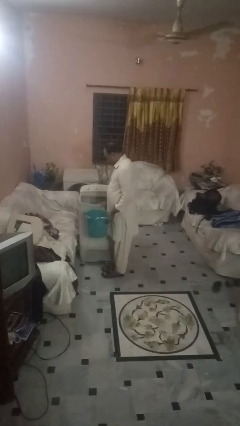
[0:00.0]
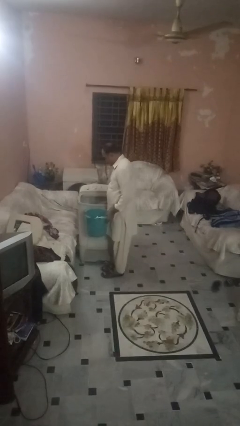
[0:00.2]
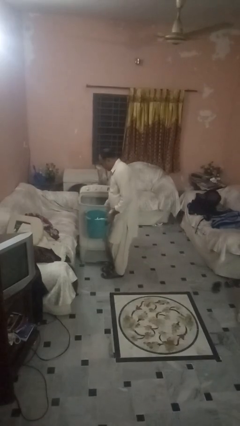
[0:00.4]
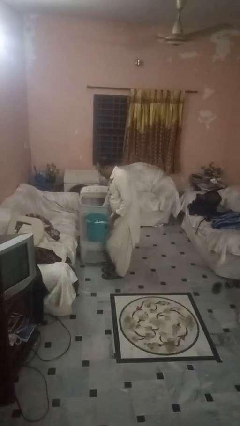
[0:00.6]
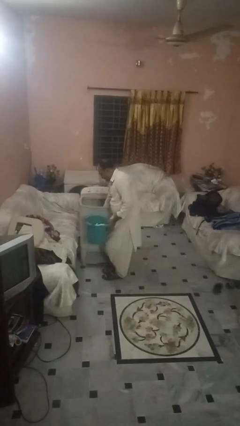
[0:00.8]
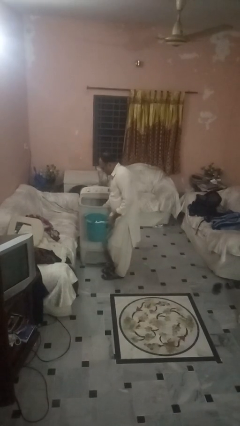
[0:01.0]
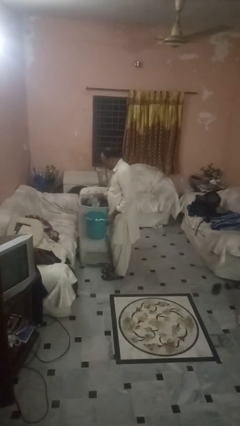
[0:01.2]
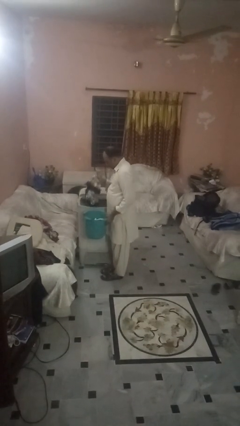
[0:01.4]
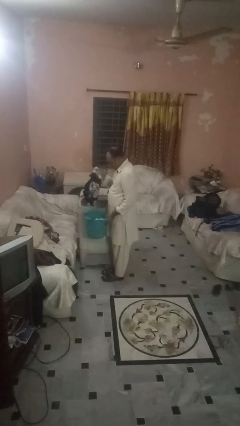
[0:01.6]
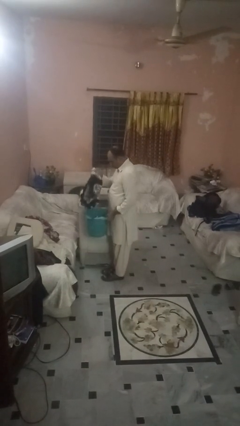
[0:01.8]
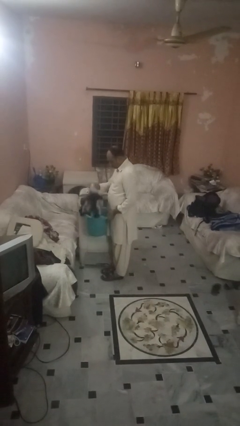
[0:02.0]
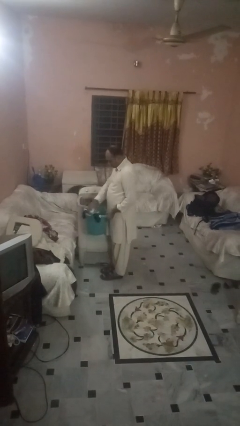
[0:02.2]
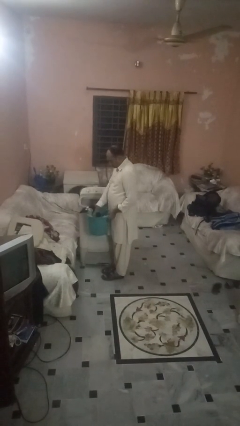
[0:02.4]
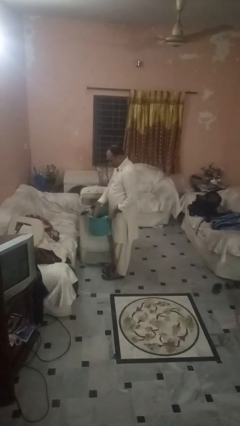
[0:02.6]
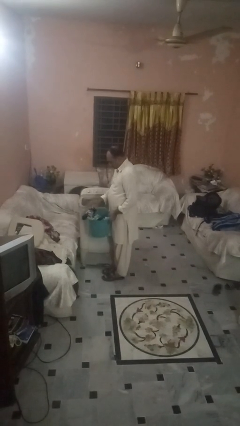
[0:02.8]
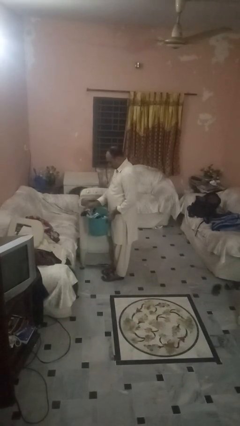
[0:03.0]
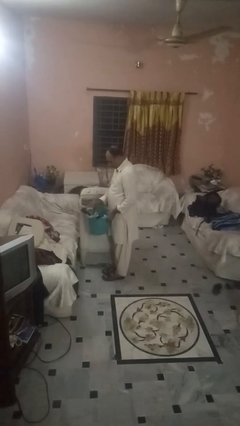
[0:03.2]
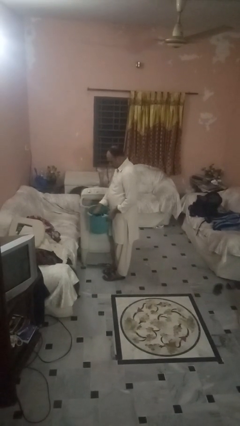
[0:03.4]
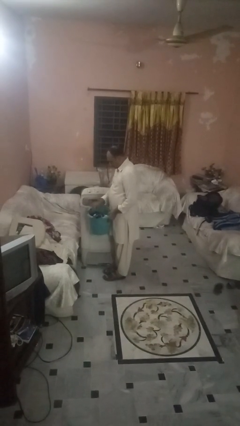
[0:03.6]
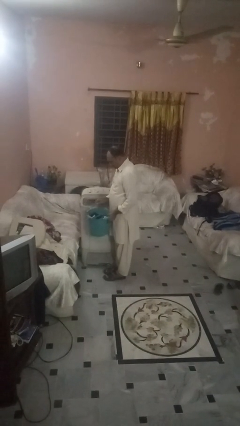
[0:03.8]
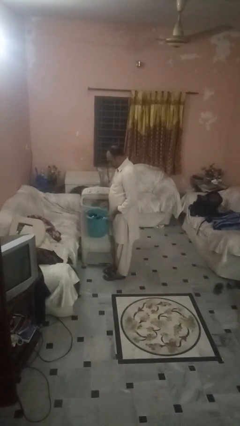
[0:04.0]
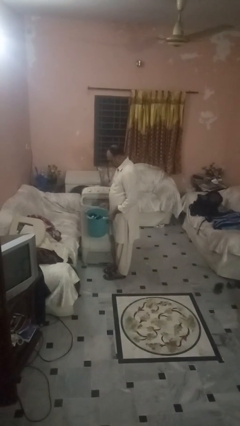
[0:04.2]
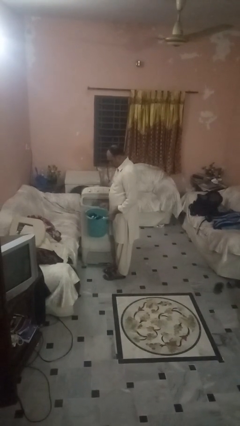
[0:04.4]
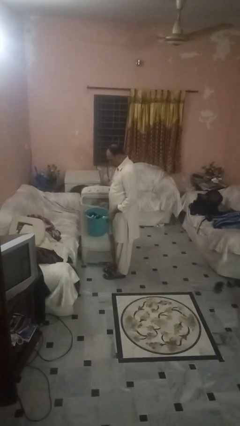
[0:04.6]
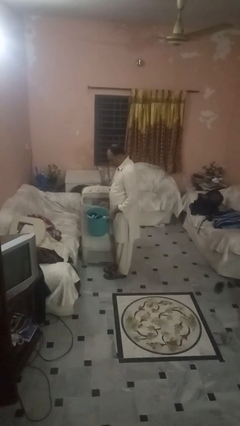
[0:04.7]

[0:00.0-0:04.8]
person unloads clotheswasher

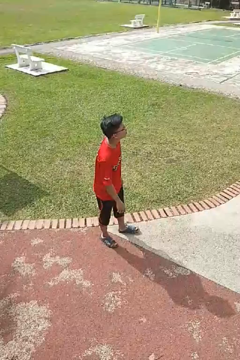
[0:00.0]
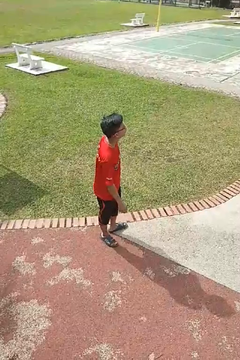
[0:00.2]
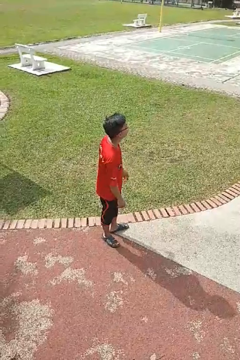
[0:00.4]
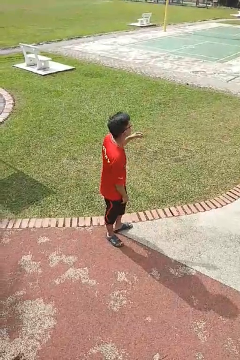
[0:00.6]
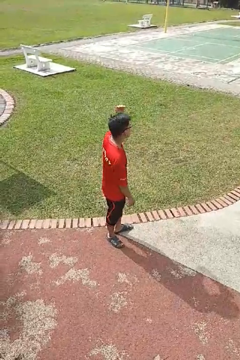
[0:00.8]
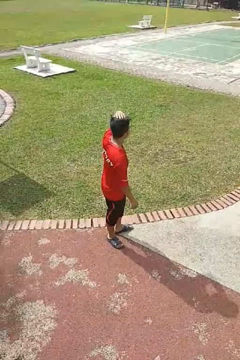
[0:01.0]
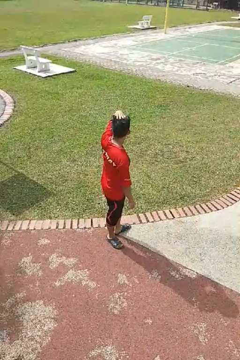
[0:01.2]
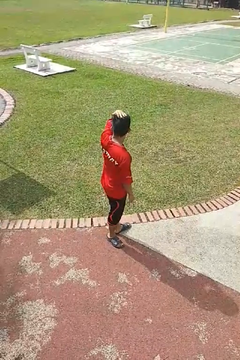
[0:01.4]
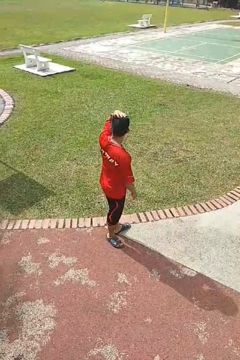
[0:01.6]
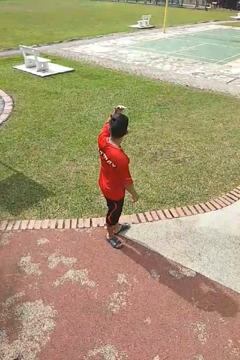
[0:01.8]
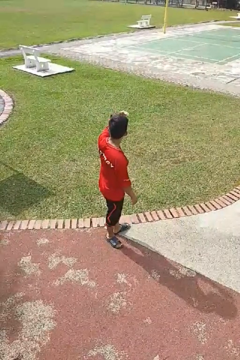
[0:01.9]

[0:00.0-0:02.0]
person pats head

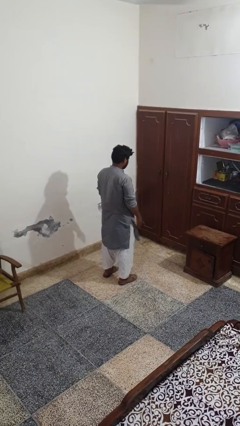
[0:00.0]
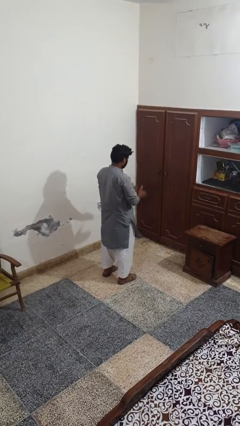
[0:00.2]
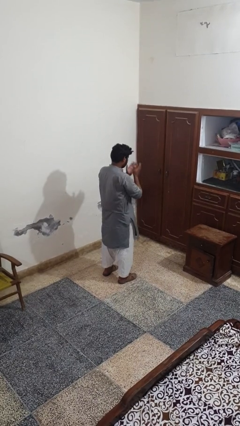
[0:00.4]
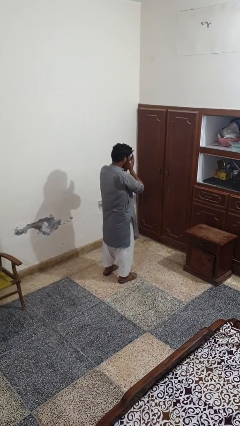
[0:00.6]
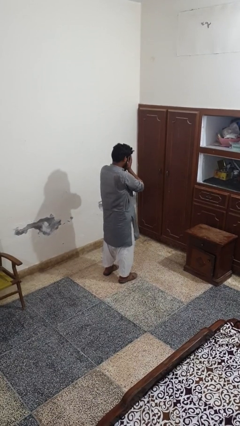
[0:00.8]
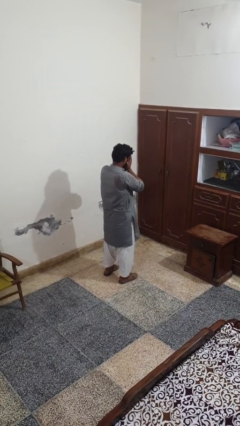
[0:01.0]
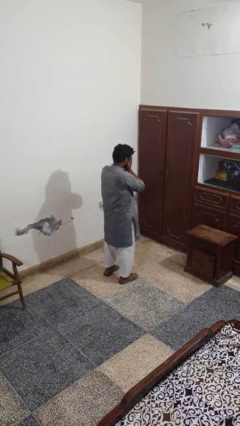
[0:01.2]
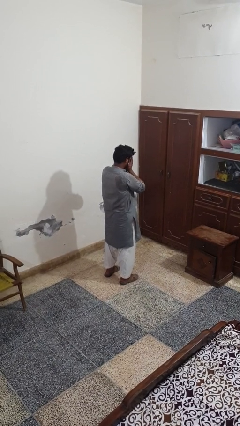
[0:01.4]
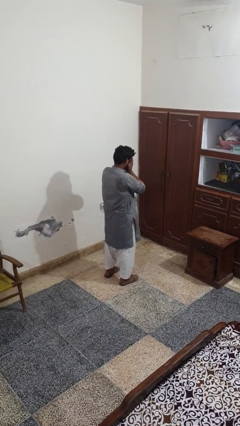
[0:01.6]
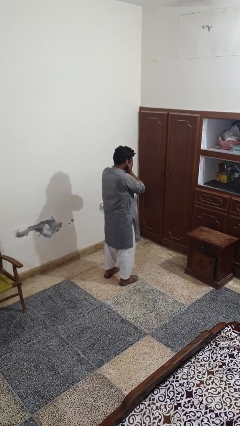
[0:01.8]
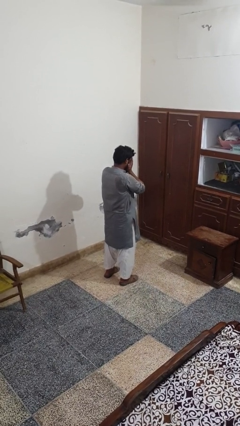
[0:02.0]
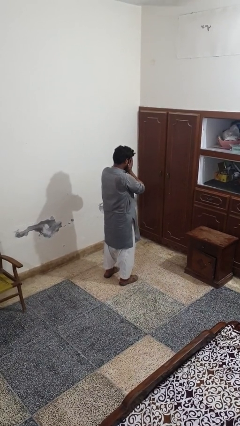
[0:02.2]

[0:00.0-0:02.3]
person covers face with hands

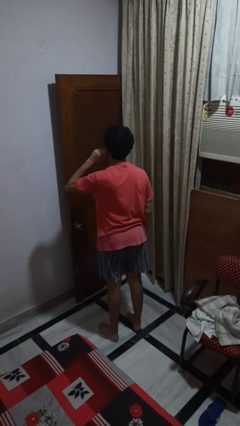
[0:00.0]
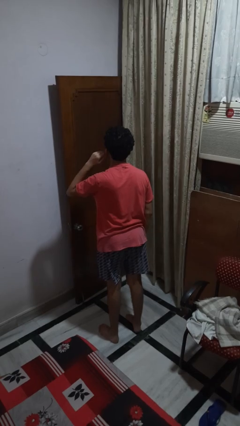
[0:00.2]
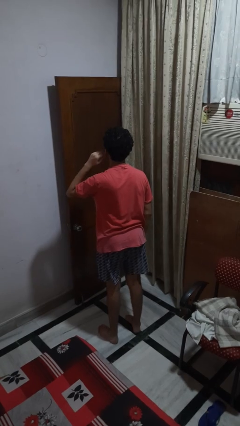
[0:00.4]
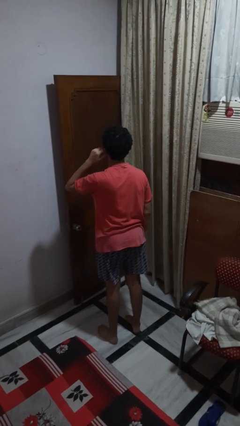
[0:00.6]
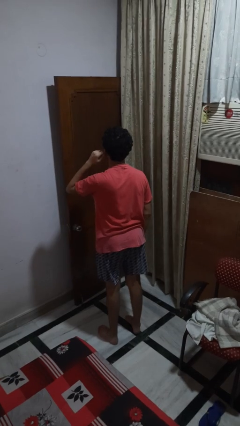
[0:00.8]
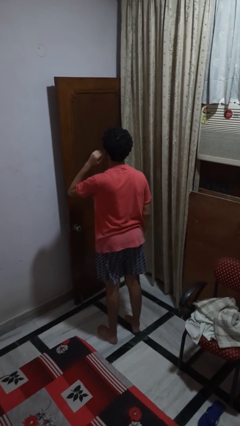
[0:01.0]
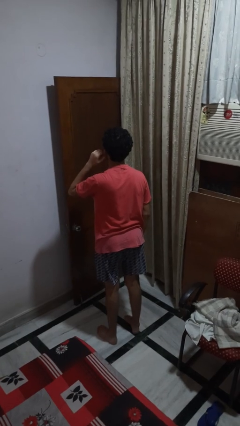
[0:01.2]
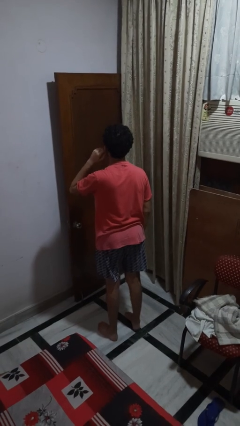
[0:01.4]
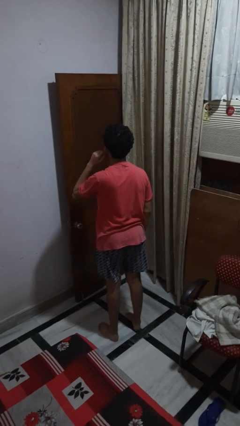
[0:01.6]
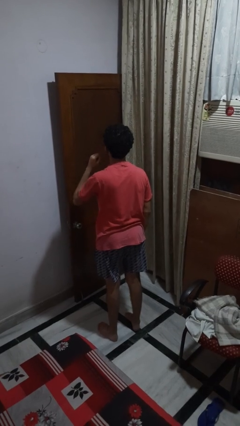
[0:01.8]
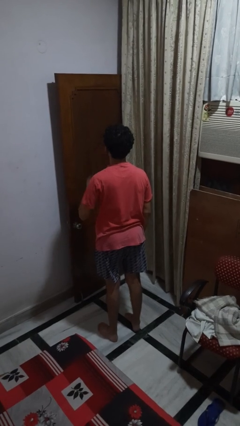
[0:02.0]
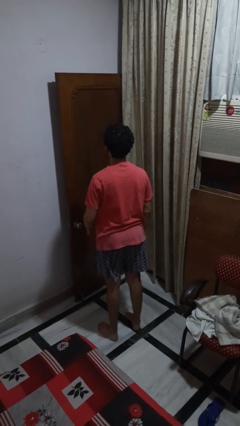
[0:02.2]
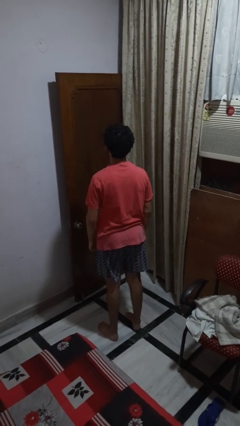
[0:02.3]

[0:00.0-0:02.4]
person touches earlobe

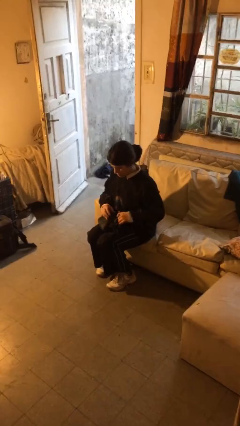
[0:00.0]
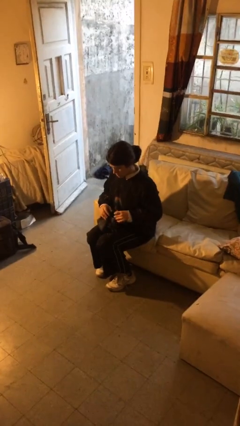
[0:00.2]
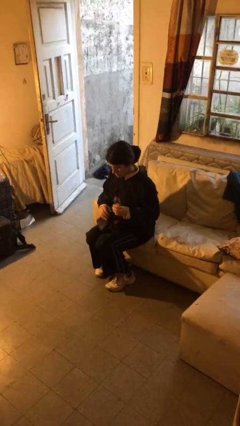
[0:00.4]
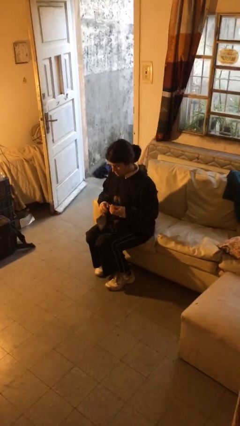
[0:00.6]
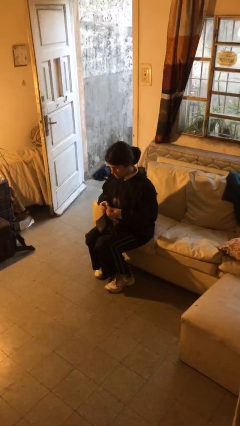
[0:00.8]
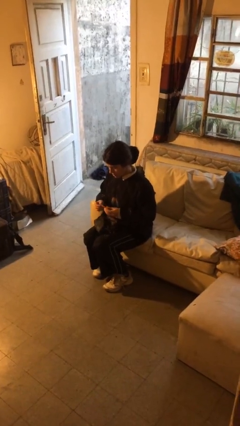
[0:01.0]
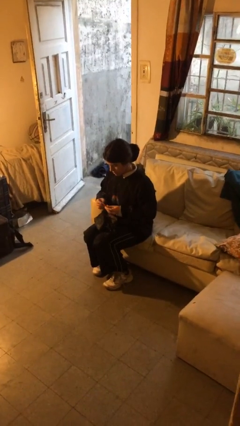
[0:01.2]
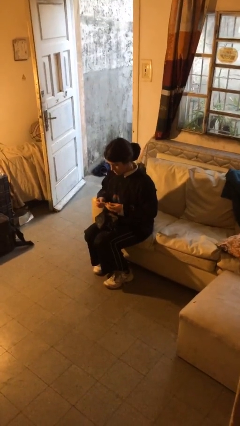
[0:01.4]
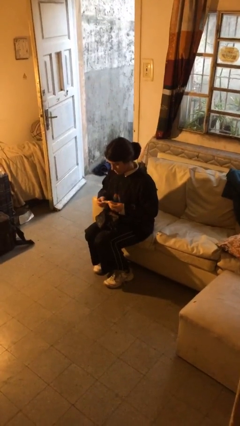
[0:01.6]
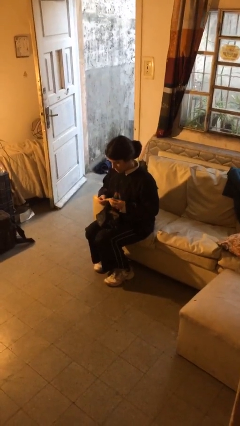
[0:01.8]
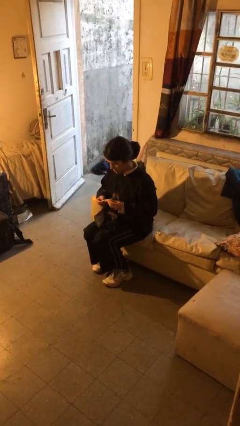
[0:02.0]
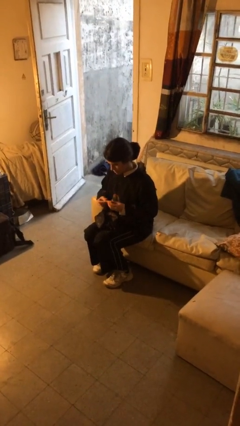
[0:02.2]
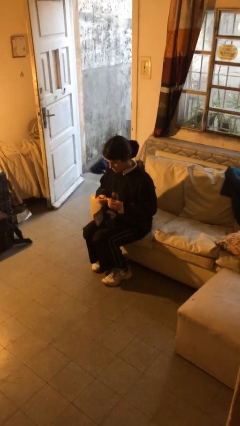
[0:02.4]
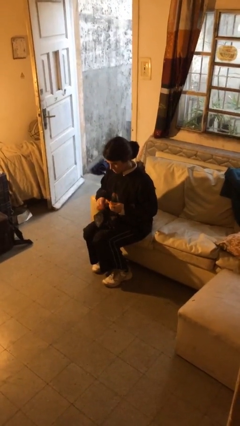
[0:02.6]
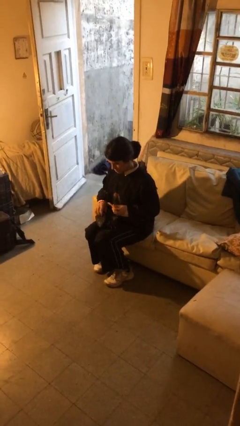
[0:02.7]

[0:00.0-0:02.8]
person takes object from purse

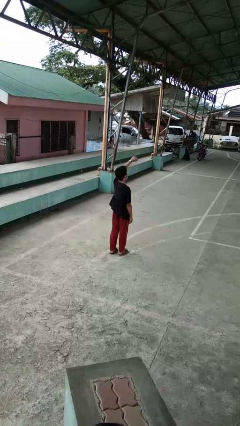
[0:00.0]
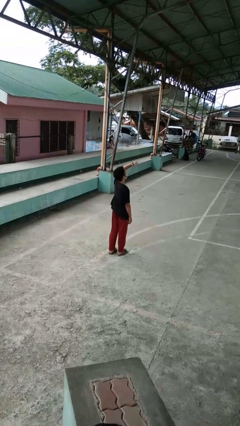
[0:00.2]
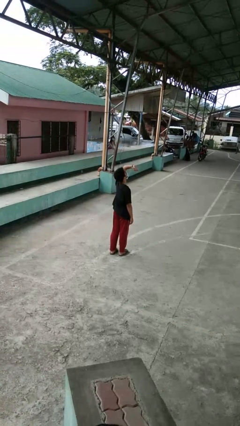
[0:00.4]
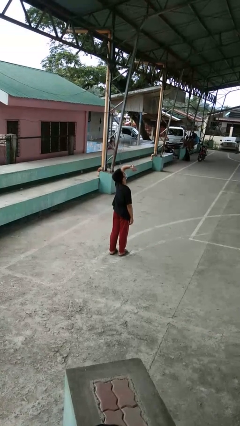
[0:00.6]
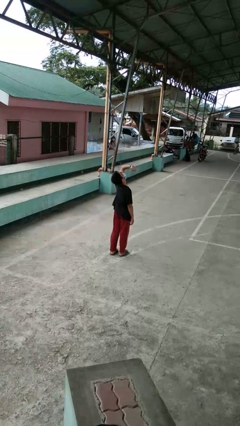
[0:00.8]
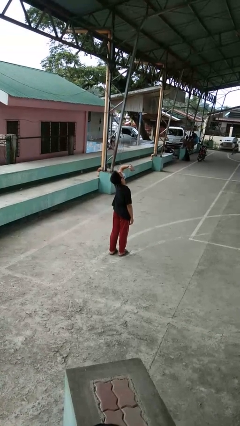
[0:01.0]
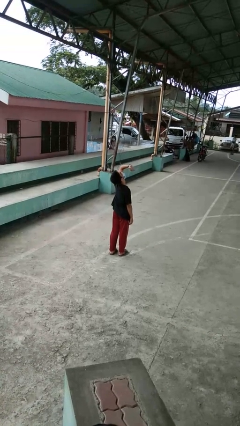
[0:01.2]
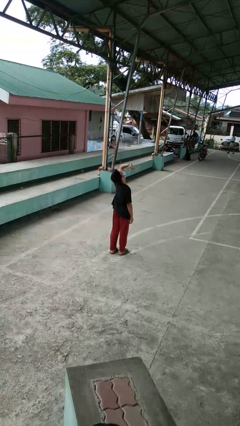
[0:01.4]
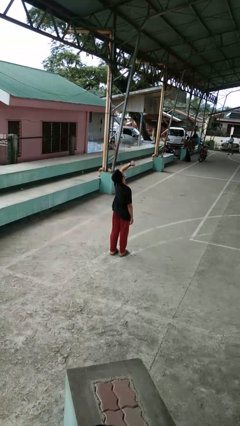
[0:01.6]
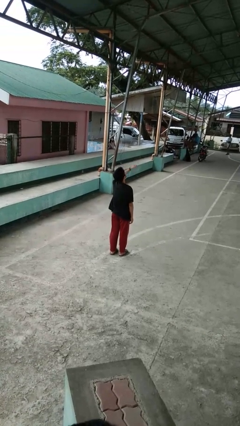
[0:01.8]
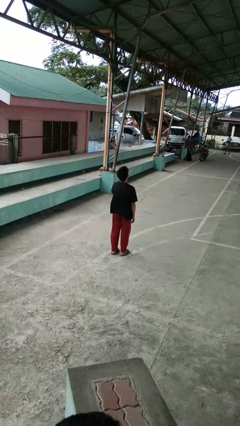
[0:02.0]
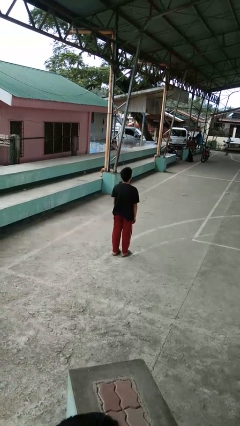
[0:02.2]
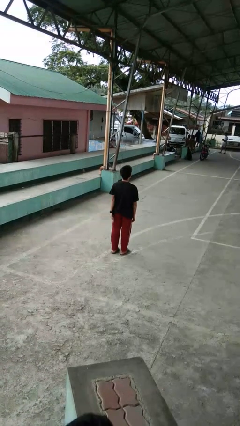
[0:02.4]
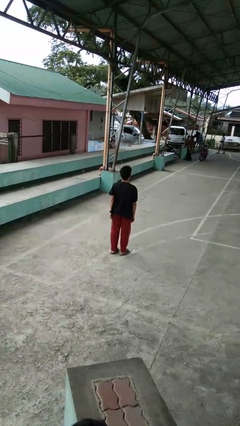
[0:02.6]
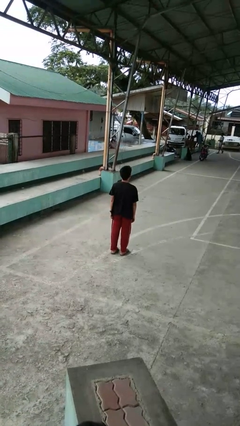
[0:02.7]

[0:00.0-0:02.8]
person looks at wristwatch

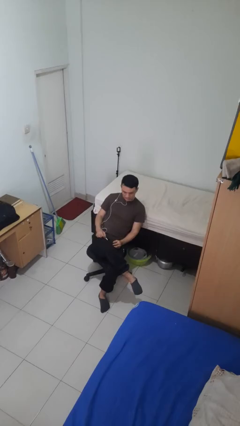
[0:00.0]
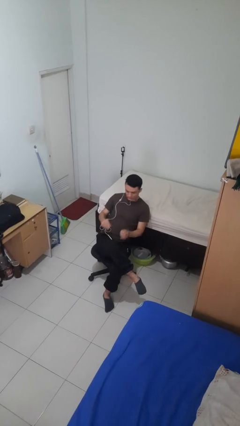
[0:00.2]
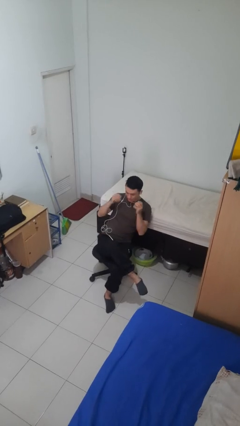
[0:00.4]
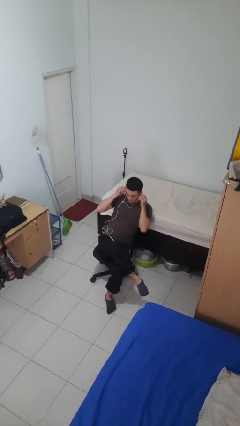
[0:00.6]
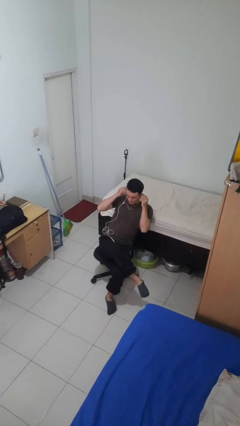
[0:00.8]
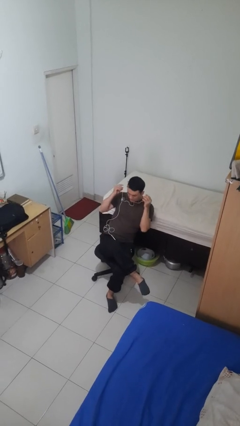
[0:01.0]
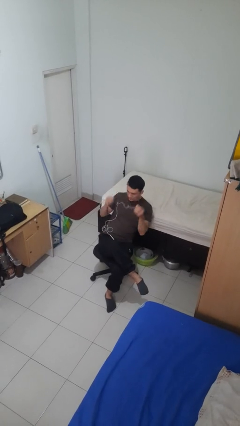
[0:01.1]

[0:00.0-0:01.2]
person takes off headphones
